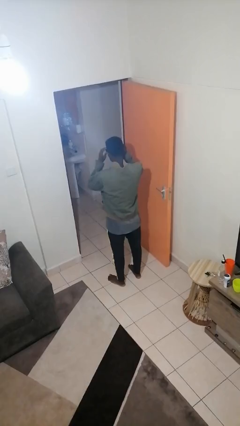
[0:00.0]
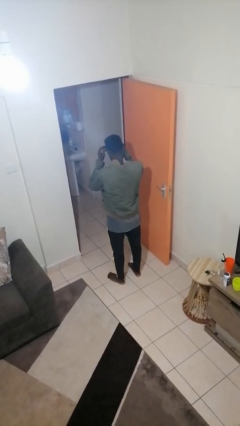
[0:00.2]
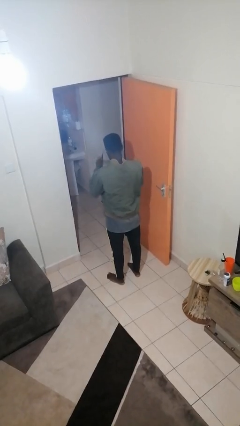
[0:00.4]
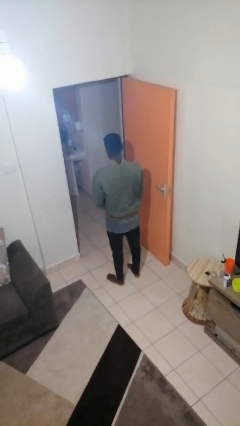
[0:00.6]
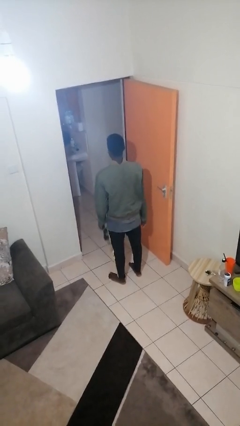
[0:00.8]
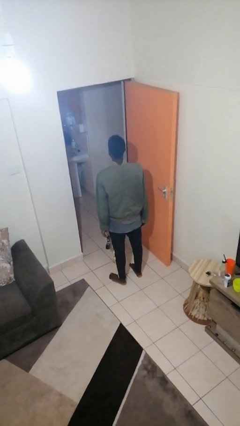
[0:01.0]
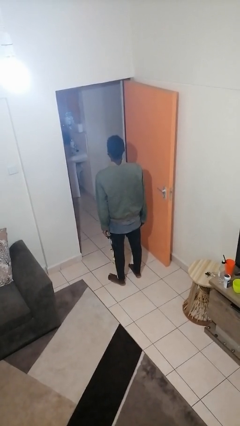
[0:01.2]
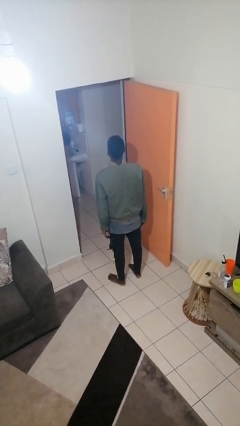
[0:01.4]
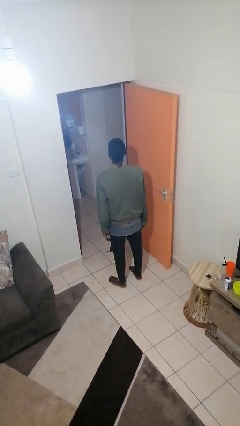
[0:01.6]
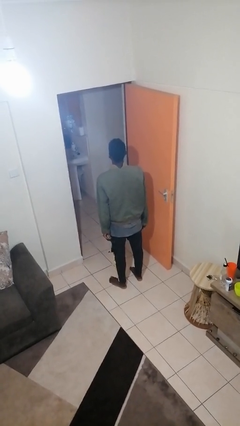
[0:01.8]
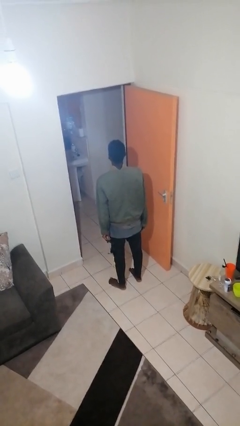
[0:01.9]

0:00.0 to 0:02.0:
person takes off sunglasses

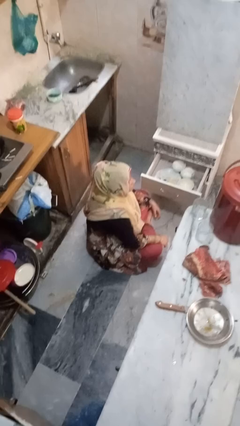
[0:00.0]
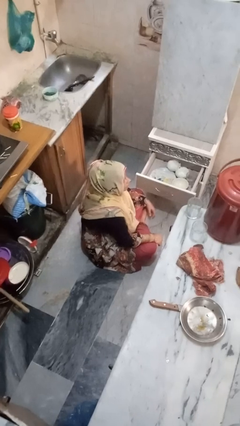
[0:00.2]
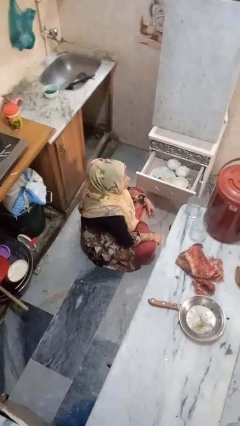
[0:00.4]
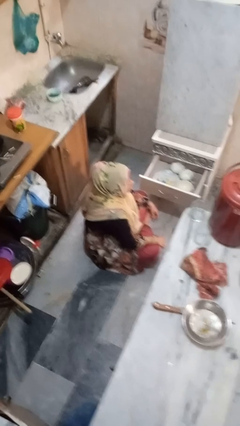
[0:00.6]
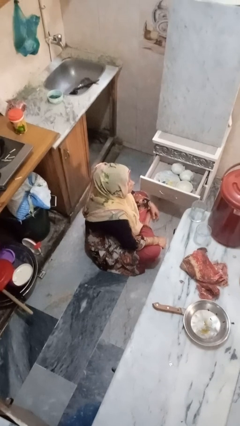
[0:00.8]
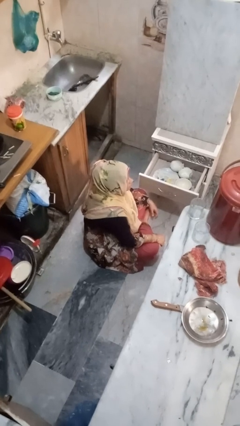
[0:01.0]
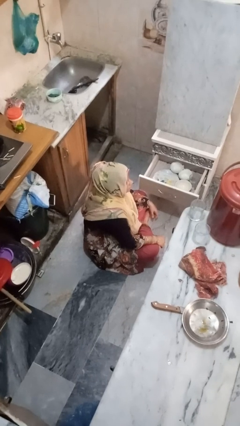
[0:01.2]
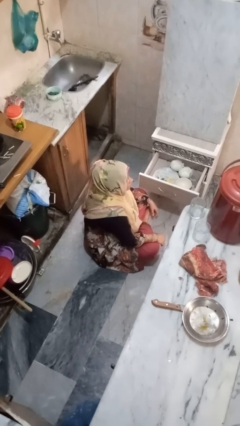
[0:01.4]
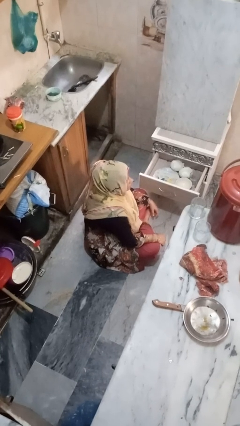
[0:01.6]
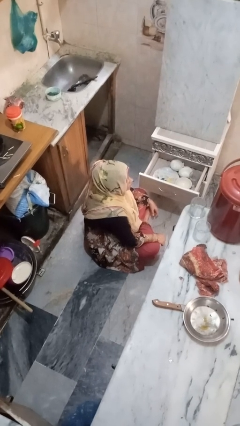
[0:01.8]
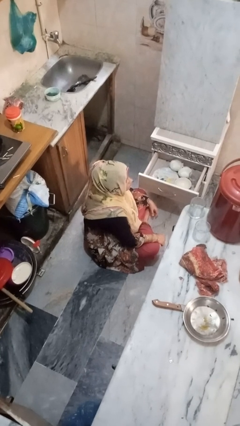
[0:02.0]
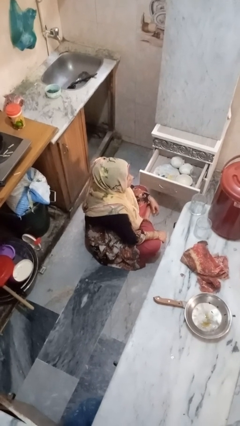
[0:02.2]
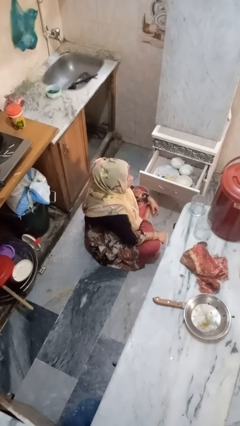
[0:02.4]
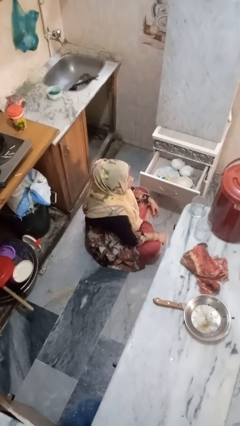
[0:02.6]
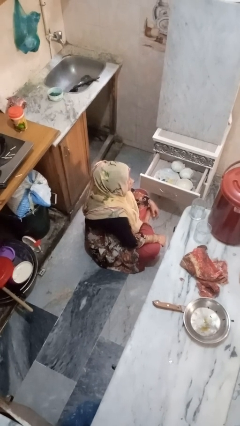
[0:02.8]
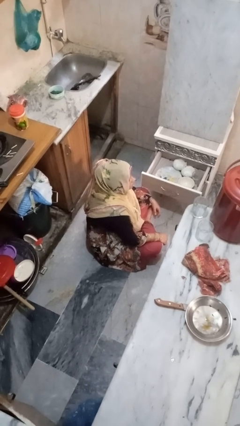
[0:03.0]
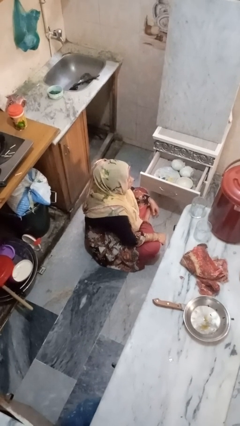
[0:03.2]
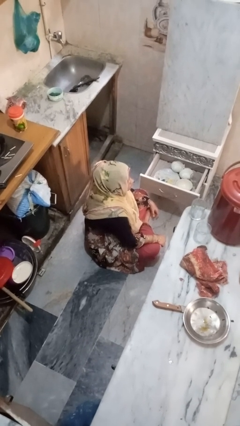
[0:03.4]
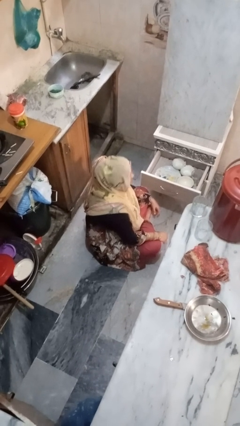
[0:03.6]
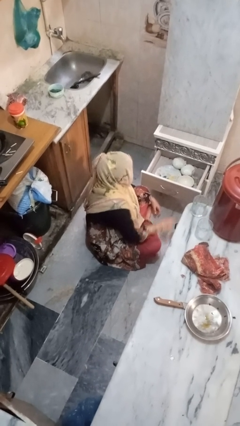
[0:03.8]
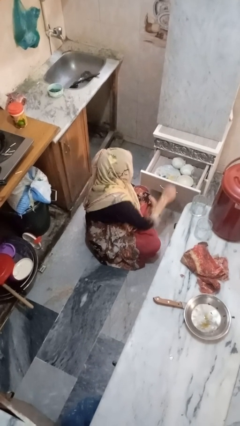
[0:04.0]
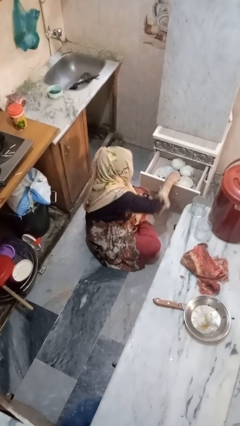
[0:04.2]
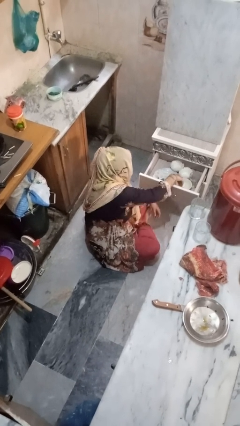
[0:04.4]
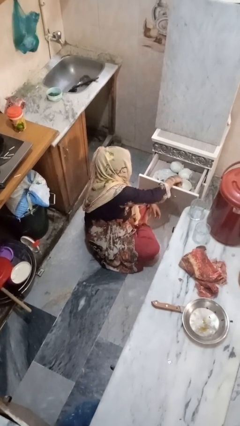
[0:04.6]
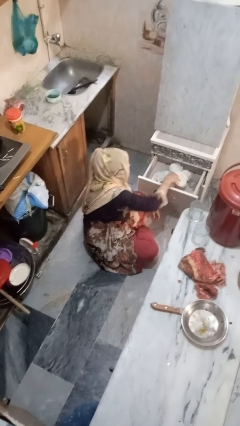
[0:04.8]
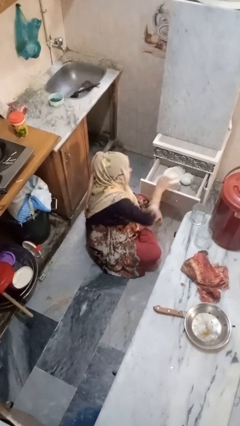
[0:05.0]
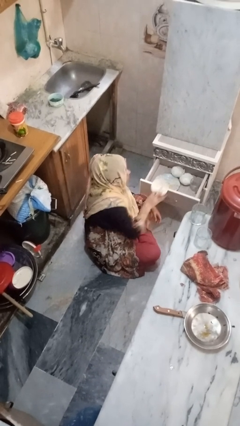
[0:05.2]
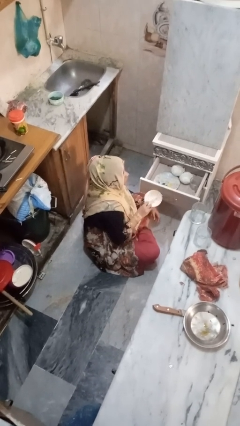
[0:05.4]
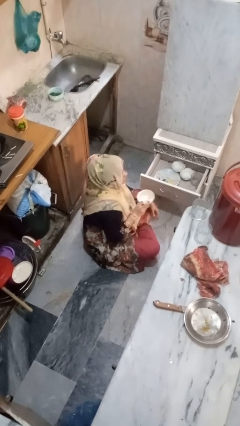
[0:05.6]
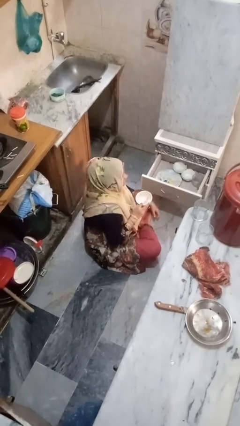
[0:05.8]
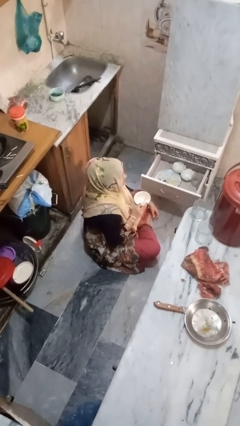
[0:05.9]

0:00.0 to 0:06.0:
person takes object from kitchen drawer

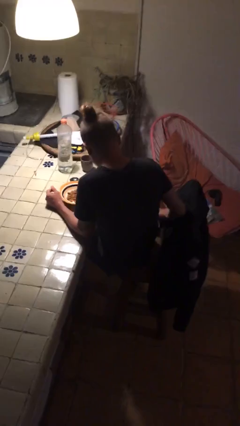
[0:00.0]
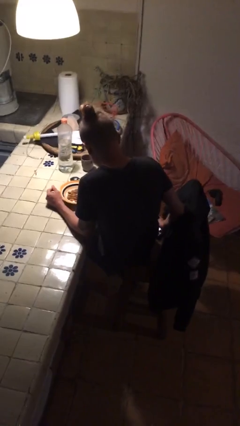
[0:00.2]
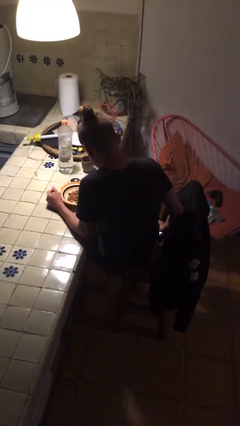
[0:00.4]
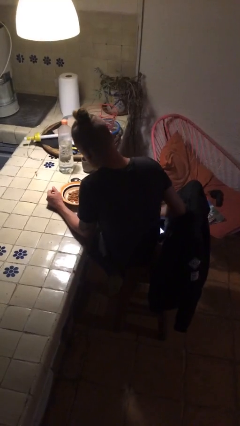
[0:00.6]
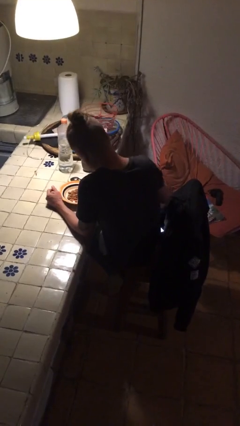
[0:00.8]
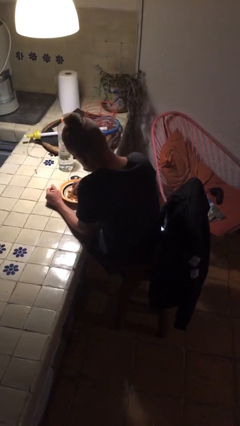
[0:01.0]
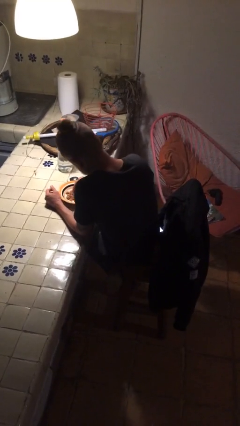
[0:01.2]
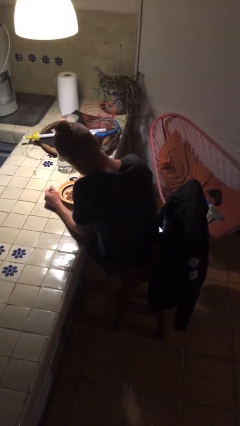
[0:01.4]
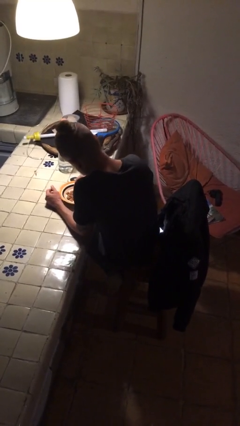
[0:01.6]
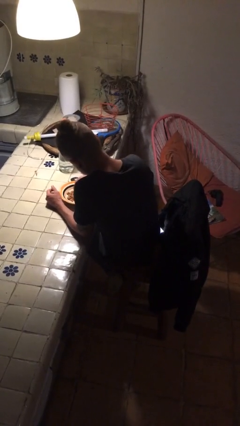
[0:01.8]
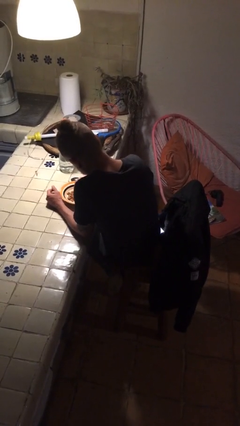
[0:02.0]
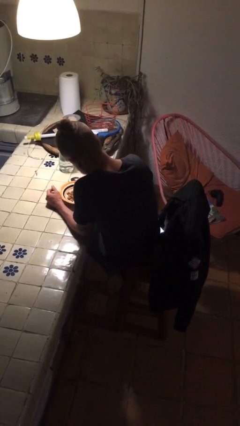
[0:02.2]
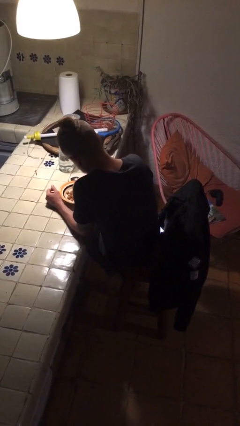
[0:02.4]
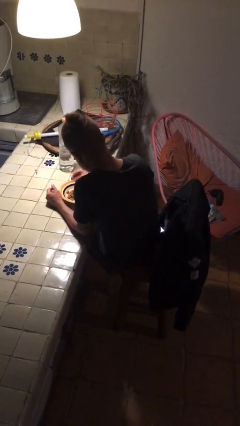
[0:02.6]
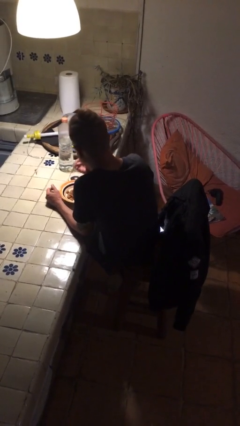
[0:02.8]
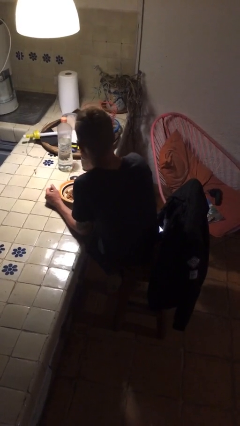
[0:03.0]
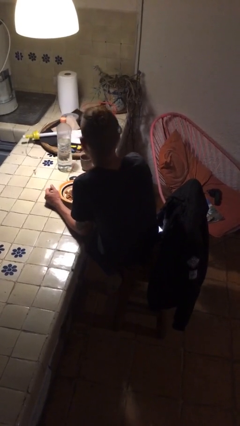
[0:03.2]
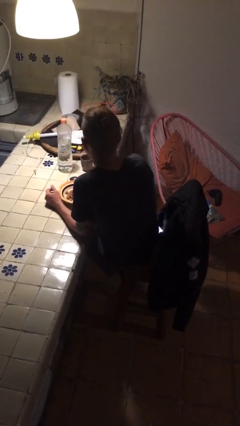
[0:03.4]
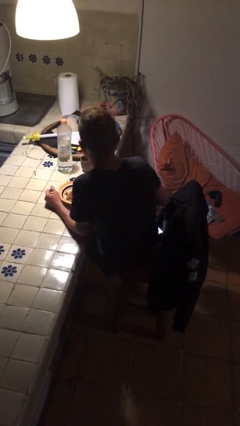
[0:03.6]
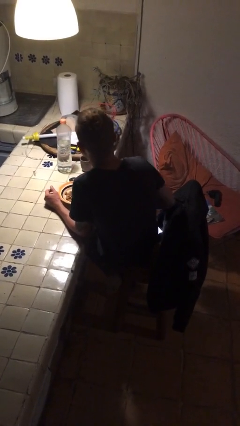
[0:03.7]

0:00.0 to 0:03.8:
person eats with hands

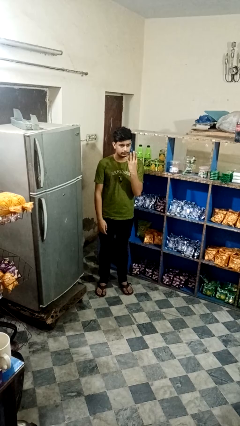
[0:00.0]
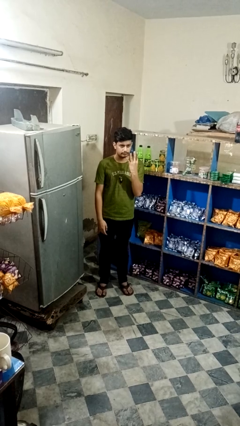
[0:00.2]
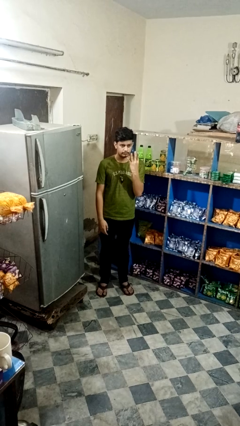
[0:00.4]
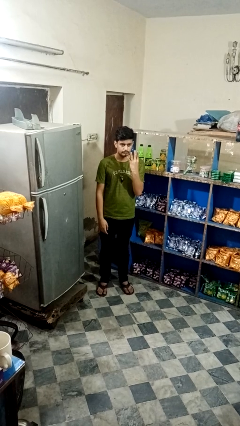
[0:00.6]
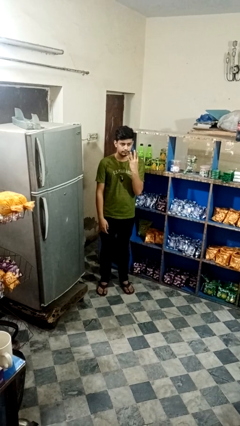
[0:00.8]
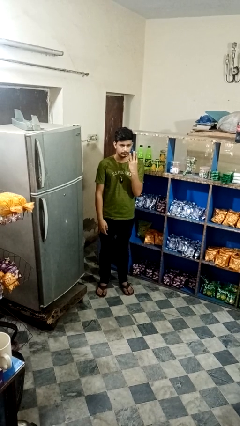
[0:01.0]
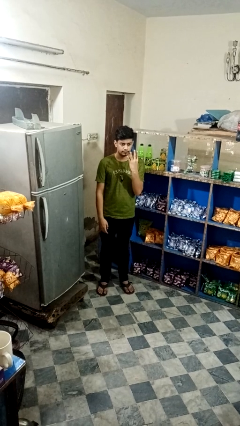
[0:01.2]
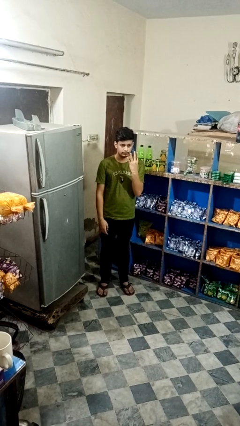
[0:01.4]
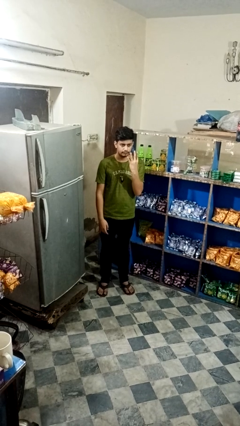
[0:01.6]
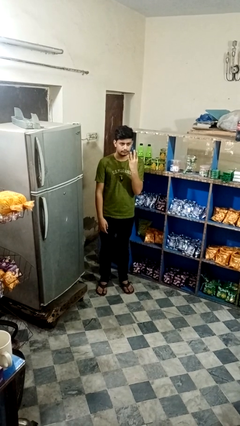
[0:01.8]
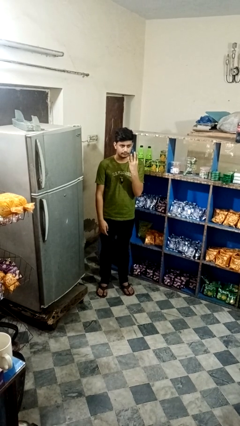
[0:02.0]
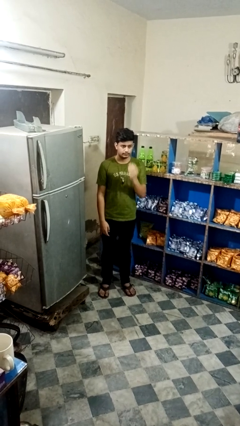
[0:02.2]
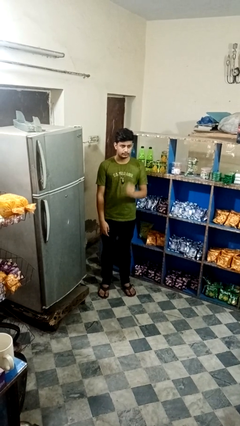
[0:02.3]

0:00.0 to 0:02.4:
person gestures number four

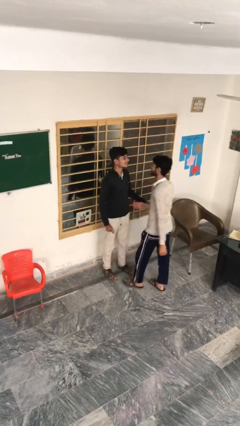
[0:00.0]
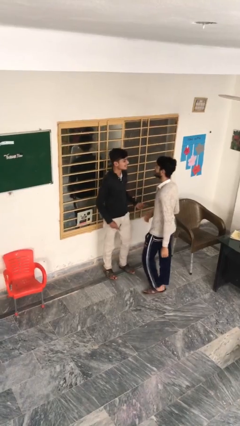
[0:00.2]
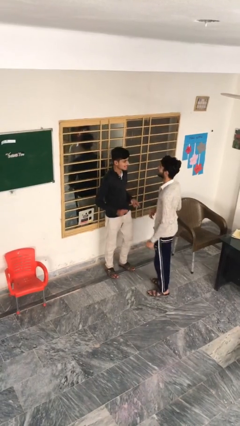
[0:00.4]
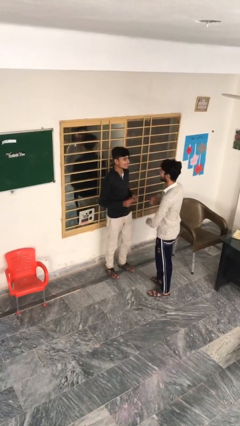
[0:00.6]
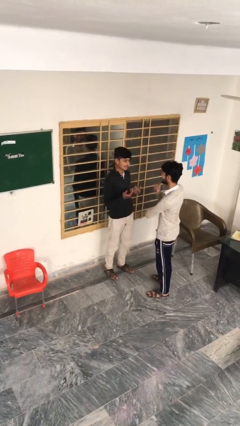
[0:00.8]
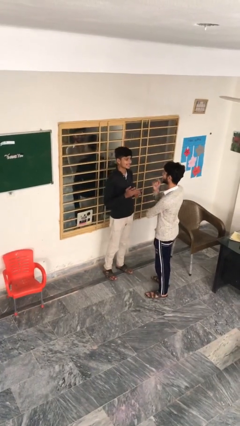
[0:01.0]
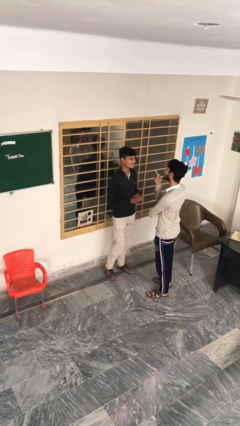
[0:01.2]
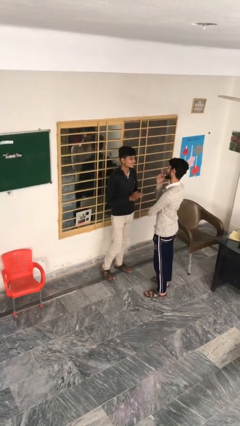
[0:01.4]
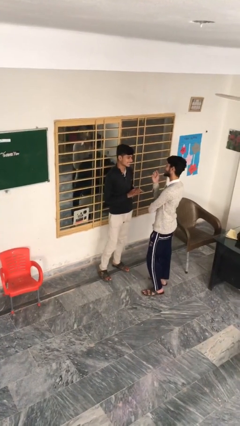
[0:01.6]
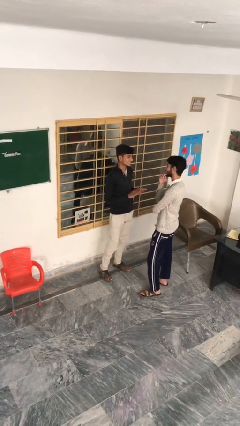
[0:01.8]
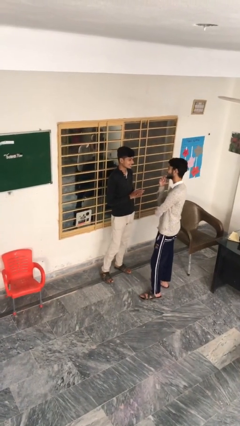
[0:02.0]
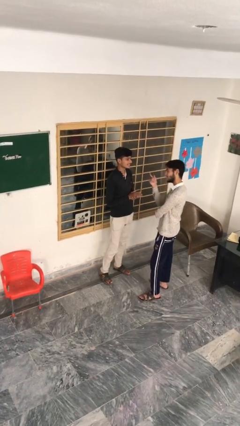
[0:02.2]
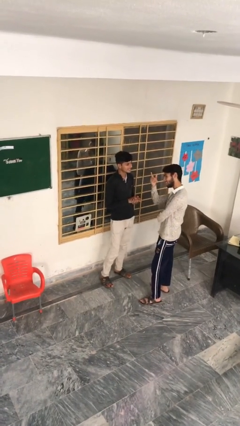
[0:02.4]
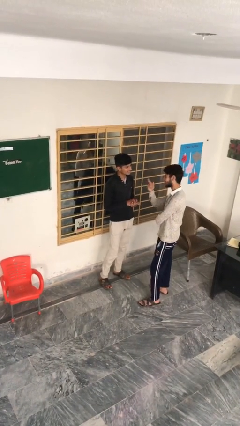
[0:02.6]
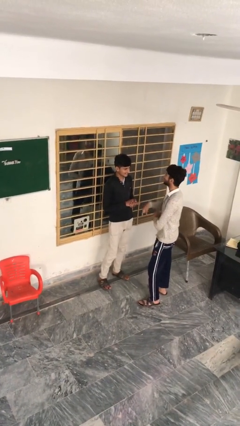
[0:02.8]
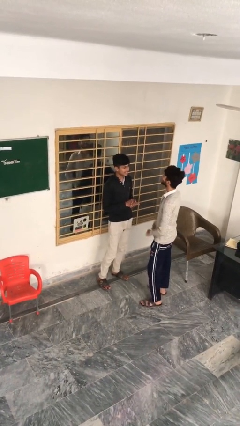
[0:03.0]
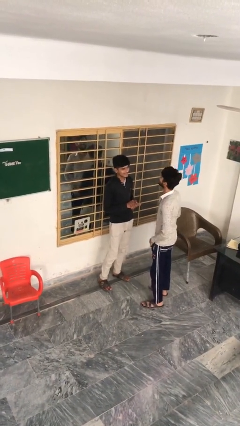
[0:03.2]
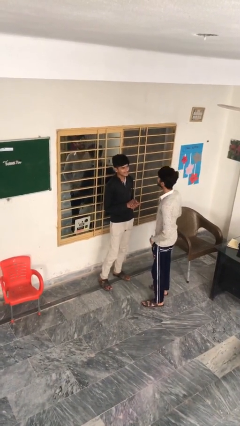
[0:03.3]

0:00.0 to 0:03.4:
person talks to person
